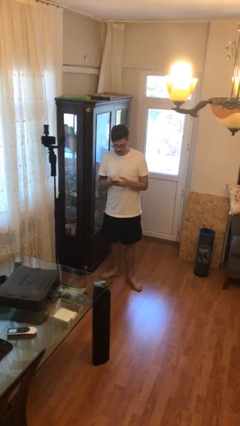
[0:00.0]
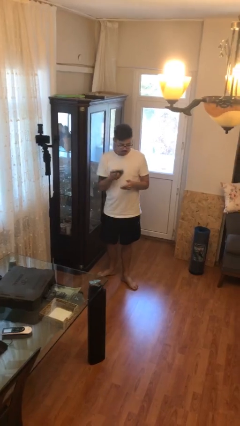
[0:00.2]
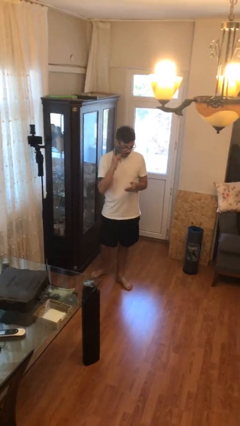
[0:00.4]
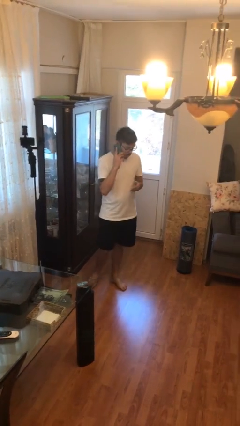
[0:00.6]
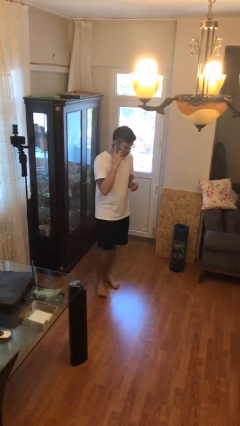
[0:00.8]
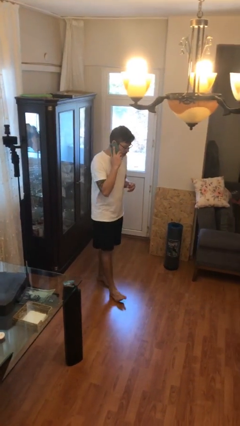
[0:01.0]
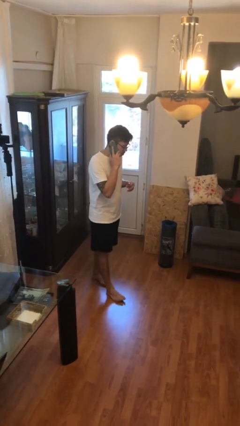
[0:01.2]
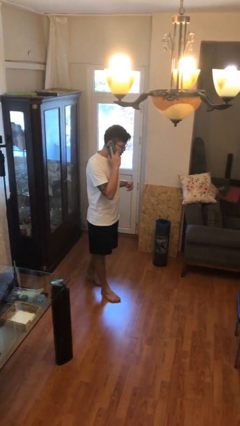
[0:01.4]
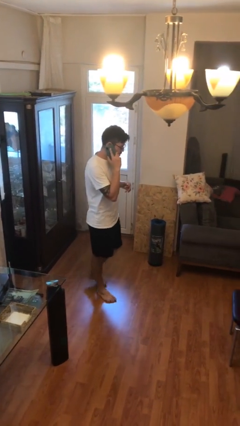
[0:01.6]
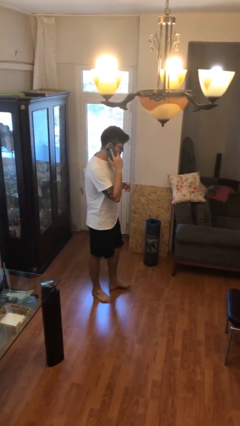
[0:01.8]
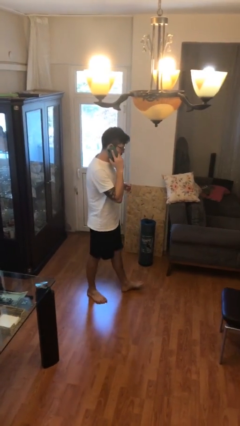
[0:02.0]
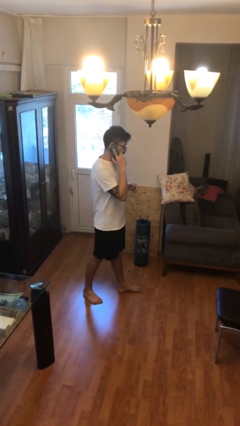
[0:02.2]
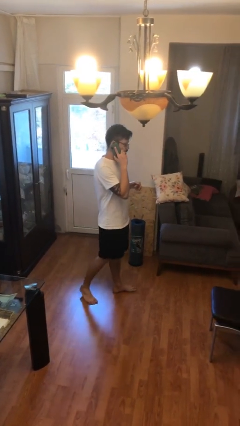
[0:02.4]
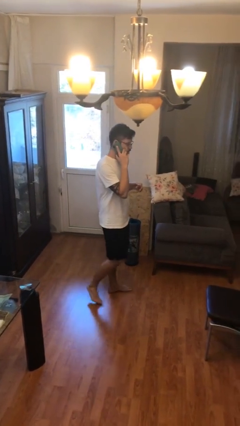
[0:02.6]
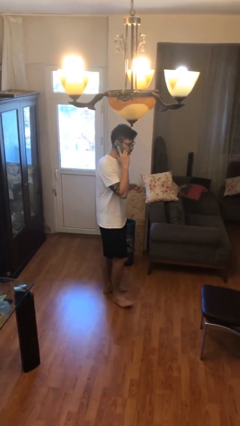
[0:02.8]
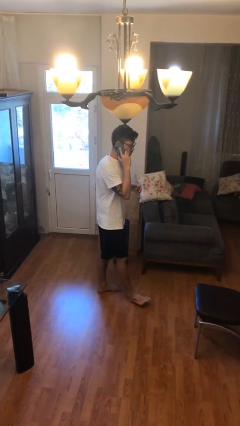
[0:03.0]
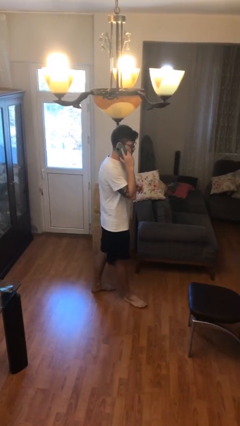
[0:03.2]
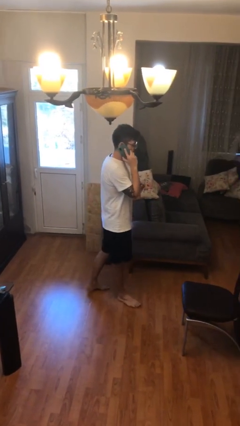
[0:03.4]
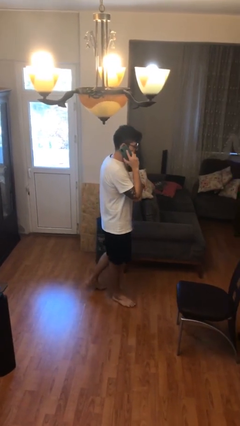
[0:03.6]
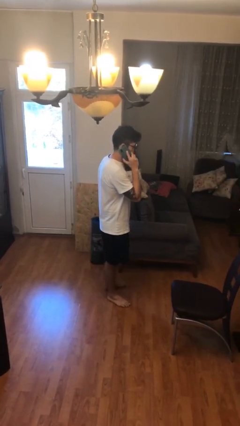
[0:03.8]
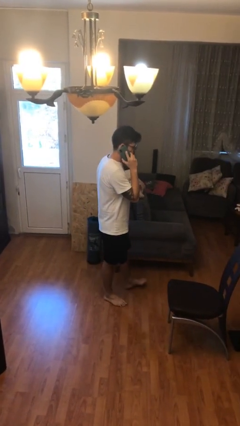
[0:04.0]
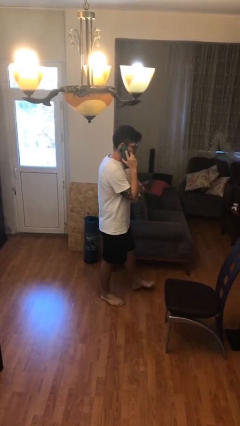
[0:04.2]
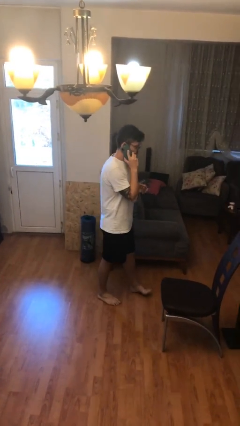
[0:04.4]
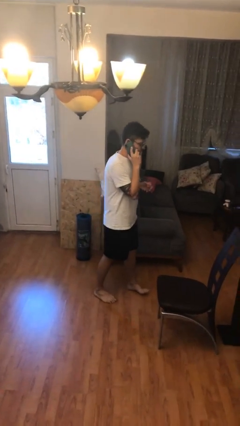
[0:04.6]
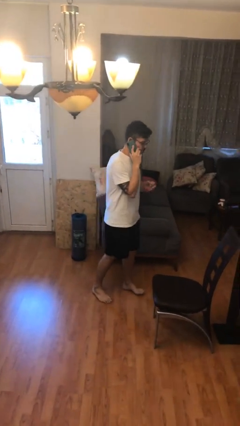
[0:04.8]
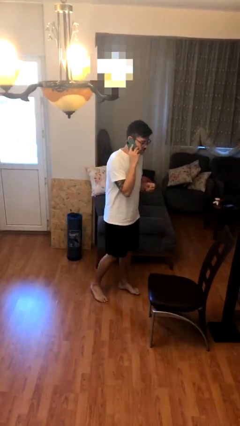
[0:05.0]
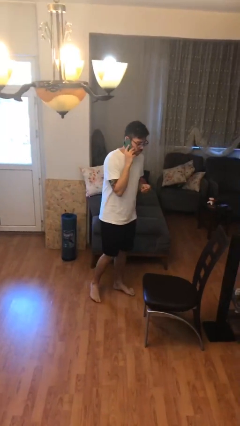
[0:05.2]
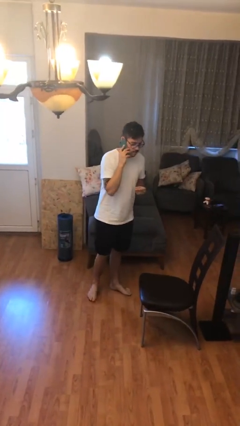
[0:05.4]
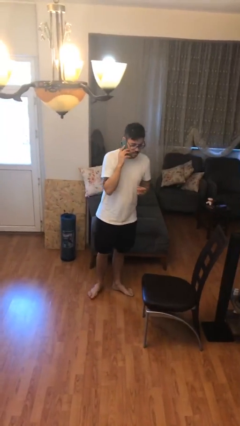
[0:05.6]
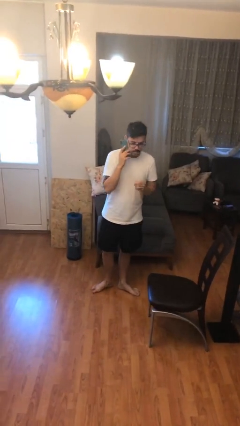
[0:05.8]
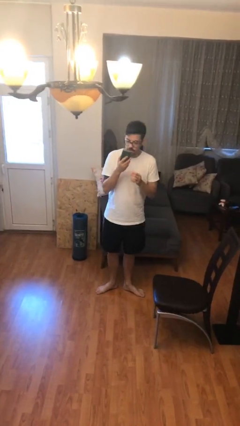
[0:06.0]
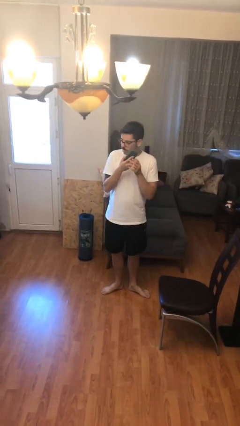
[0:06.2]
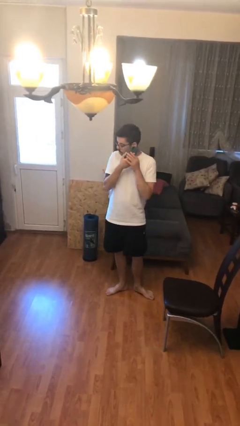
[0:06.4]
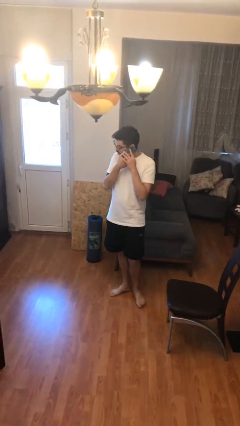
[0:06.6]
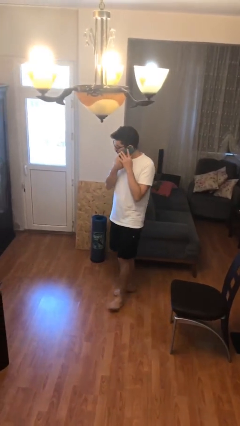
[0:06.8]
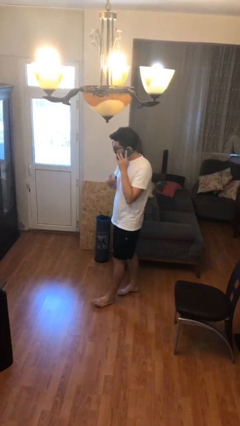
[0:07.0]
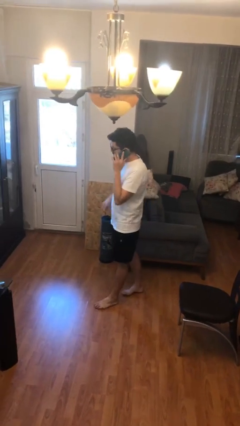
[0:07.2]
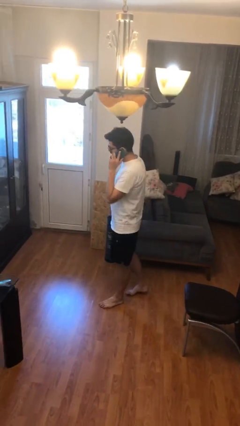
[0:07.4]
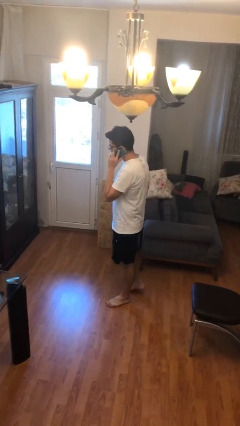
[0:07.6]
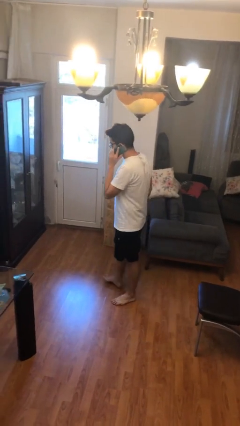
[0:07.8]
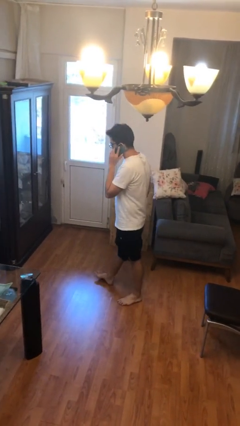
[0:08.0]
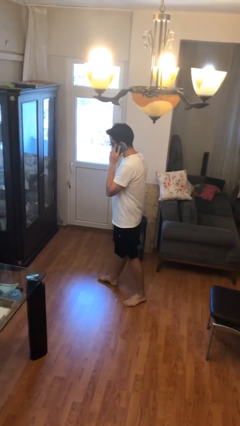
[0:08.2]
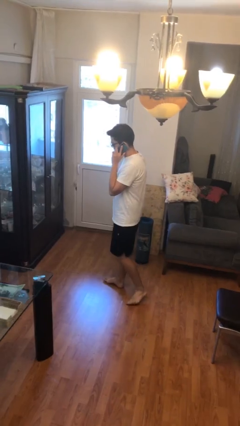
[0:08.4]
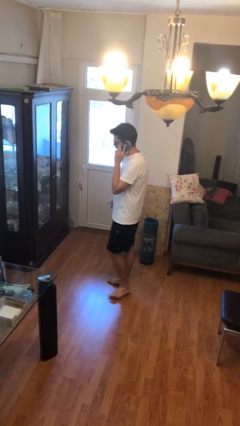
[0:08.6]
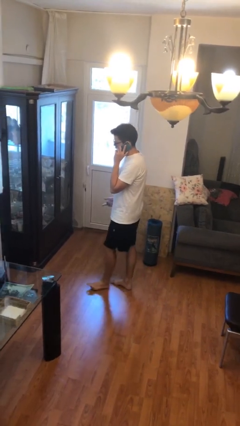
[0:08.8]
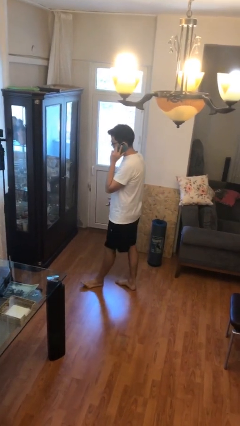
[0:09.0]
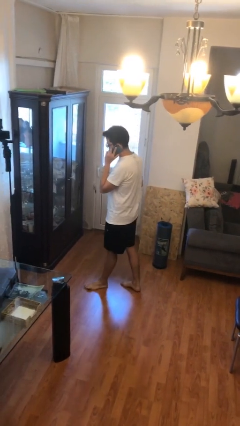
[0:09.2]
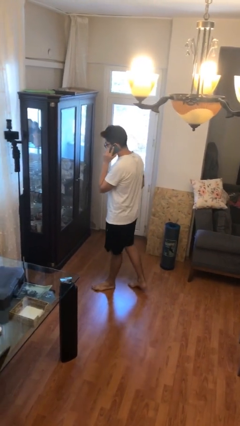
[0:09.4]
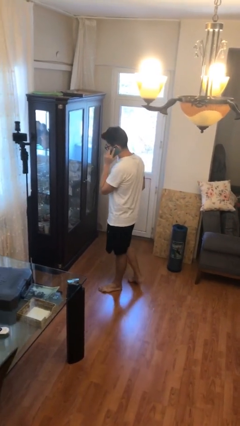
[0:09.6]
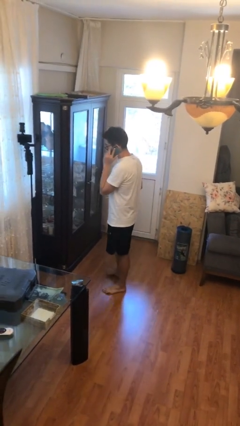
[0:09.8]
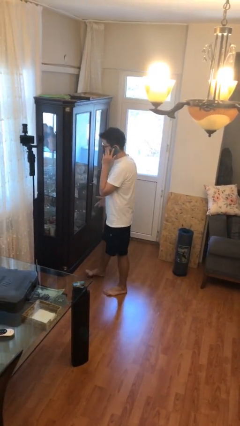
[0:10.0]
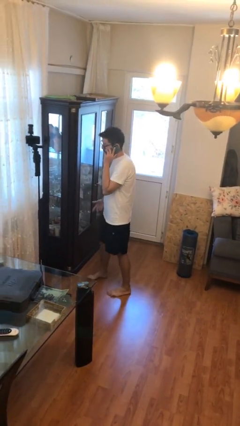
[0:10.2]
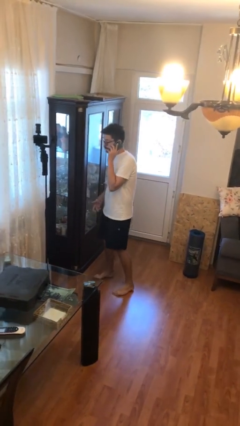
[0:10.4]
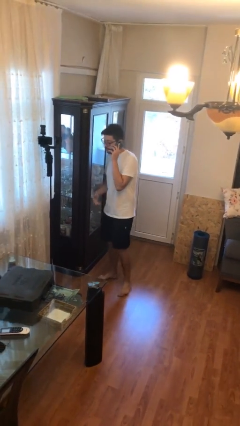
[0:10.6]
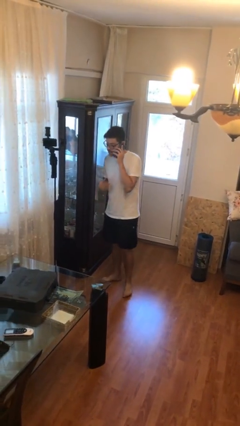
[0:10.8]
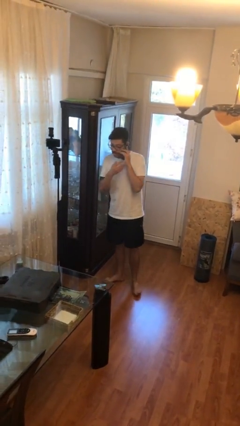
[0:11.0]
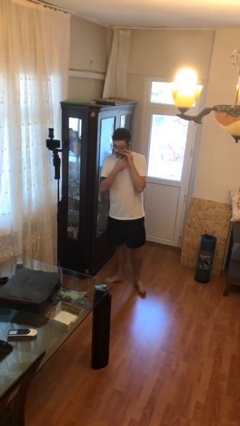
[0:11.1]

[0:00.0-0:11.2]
person talks on phone

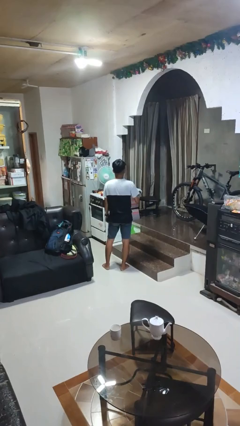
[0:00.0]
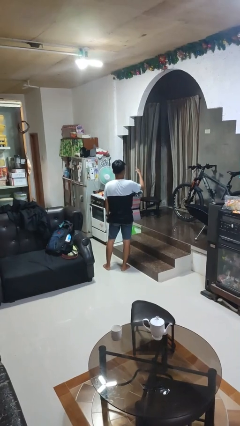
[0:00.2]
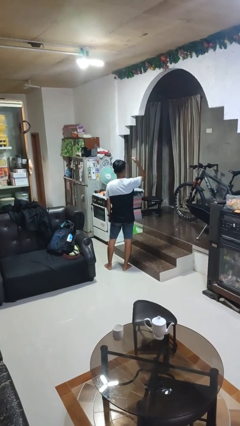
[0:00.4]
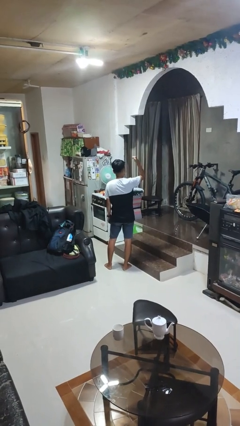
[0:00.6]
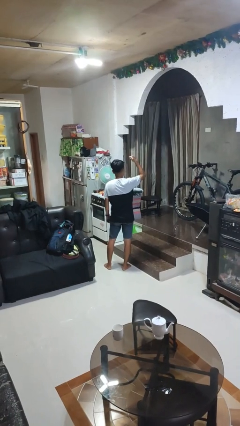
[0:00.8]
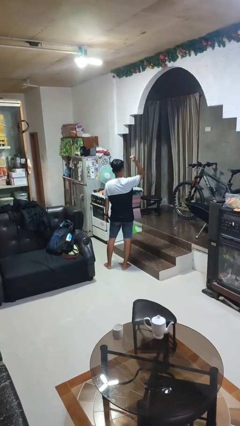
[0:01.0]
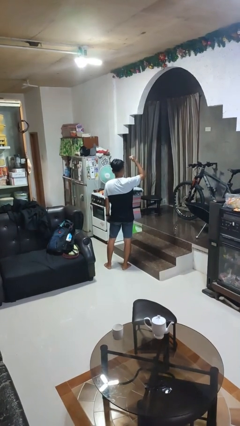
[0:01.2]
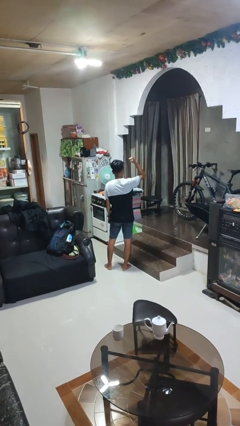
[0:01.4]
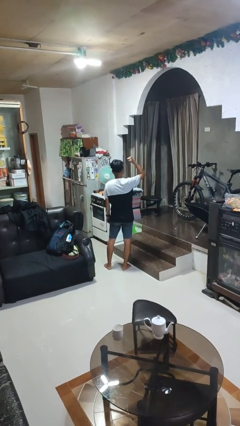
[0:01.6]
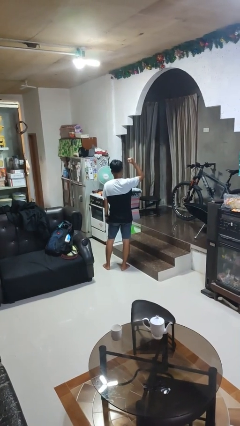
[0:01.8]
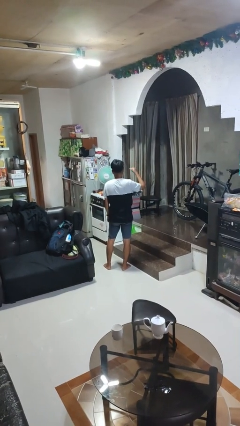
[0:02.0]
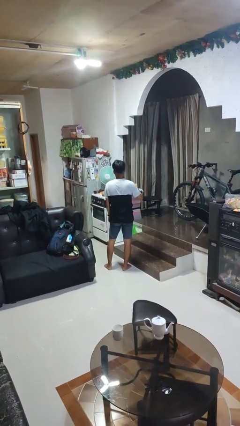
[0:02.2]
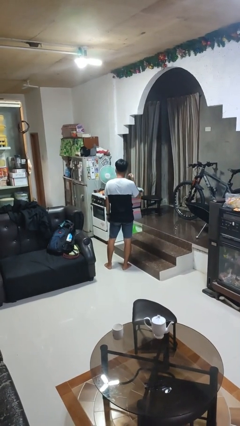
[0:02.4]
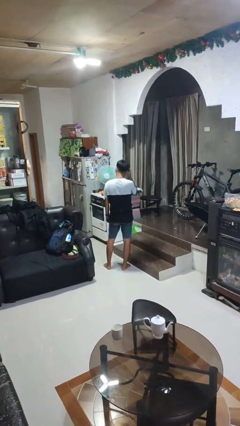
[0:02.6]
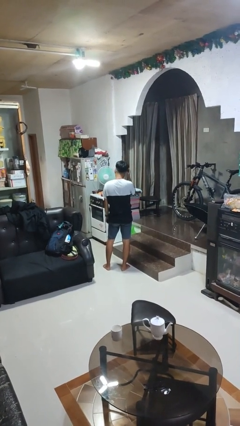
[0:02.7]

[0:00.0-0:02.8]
person gestures behind me

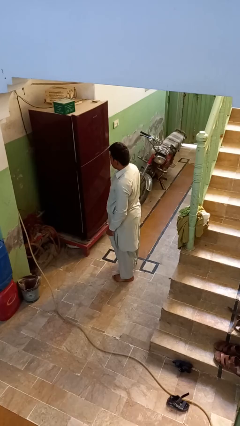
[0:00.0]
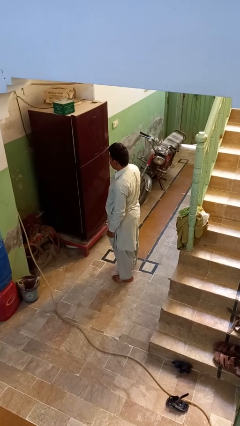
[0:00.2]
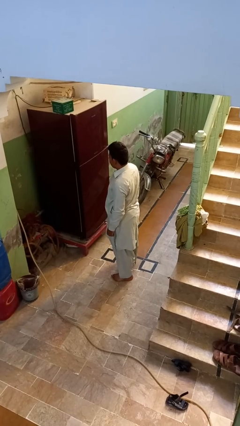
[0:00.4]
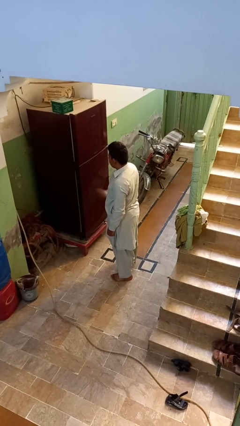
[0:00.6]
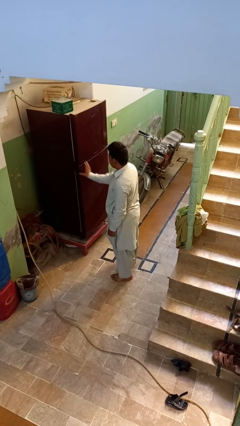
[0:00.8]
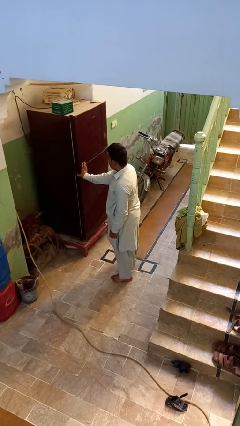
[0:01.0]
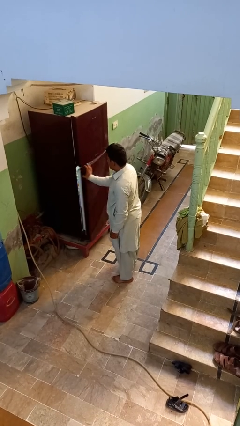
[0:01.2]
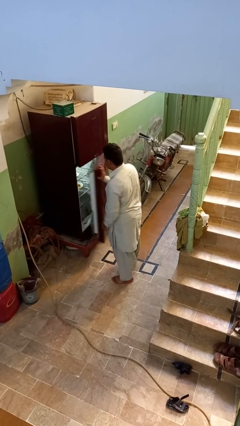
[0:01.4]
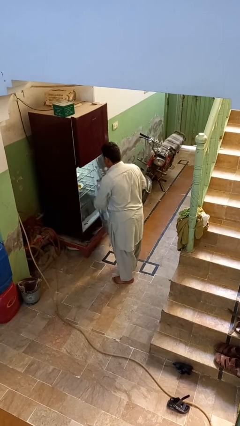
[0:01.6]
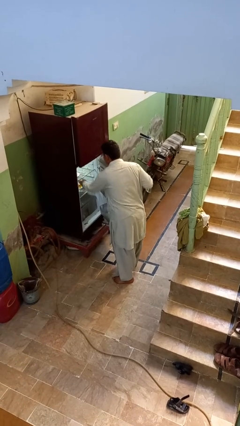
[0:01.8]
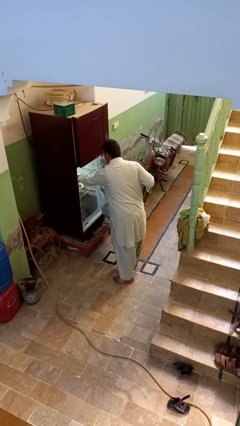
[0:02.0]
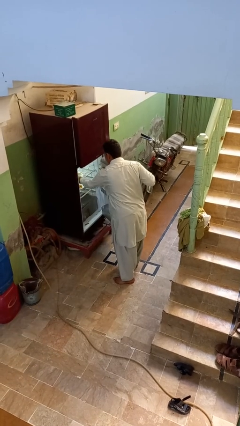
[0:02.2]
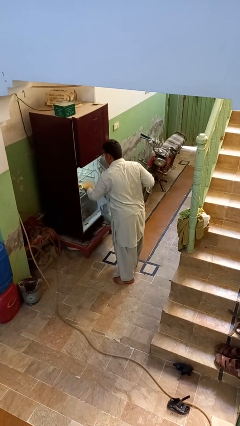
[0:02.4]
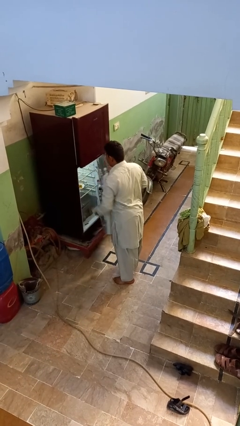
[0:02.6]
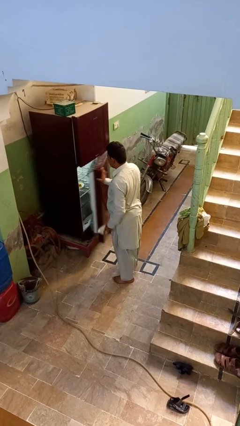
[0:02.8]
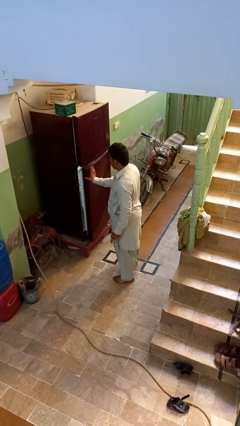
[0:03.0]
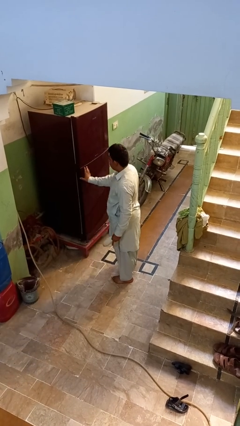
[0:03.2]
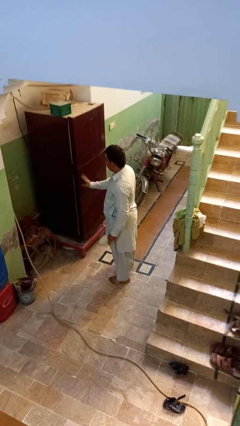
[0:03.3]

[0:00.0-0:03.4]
person takes object from refrigerator

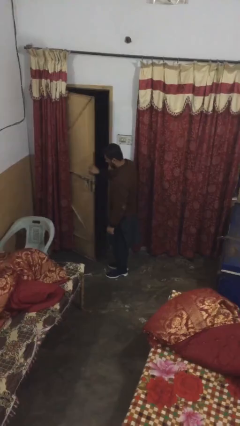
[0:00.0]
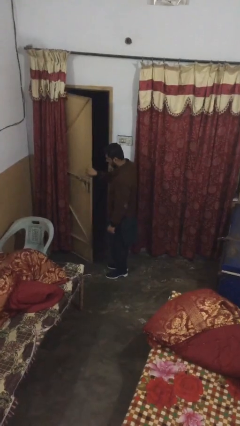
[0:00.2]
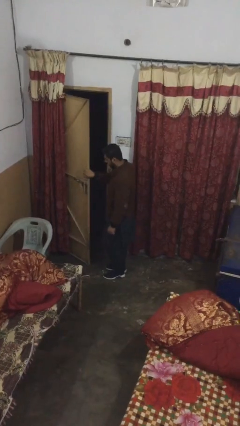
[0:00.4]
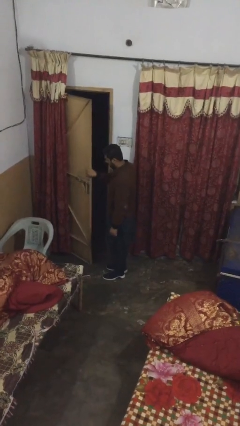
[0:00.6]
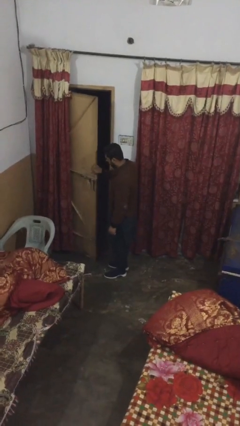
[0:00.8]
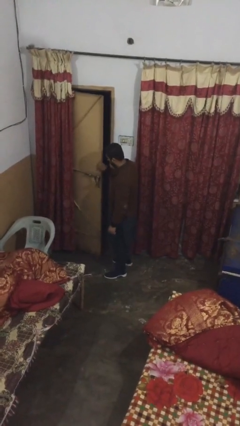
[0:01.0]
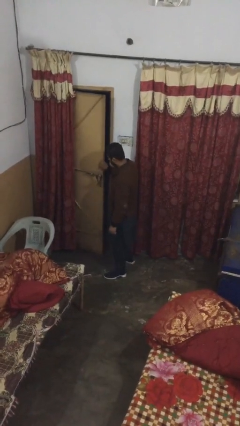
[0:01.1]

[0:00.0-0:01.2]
person closes facility door
